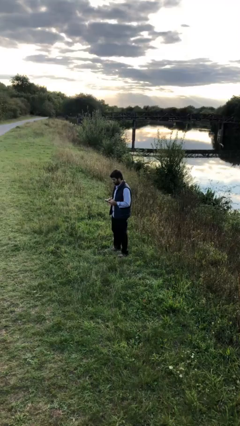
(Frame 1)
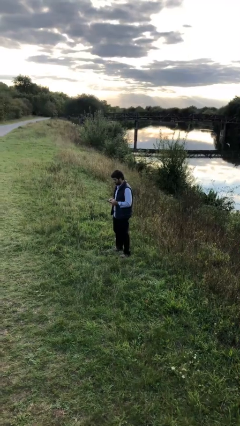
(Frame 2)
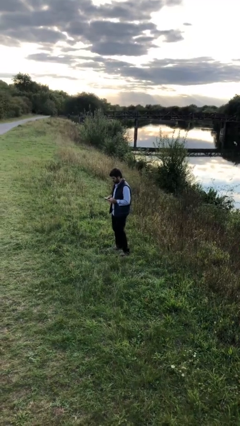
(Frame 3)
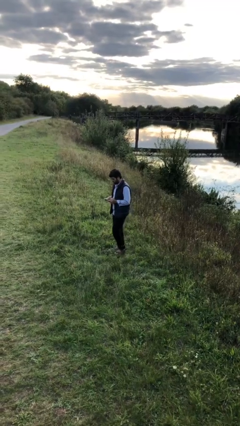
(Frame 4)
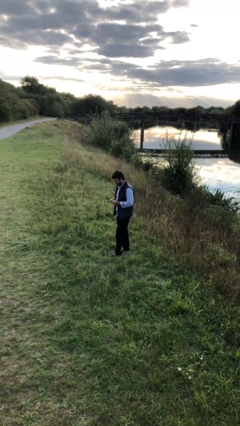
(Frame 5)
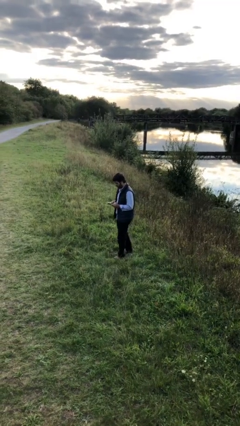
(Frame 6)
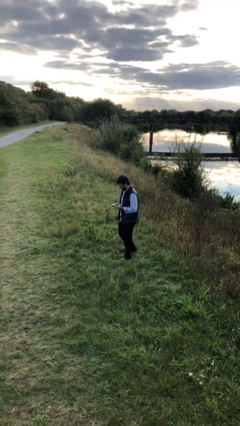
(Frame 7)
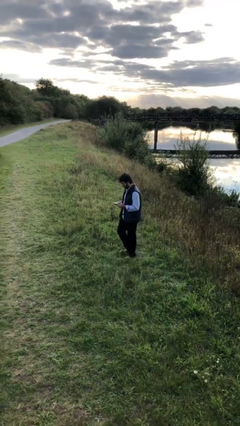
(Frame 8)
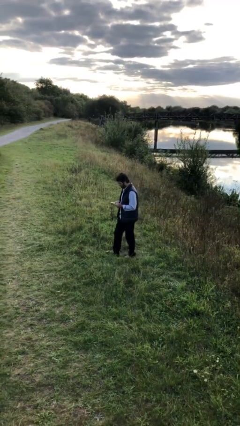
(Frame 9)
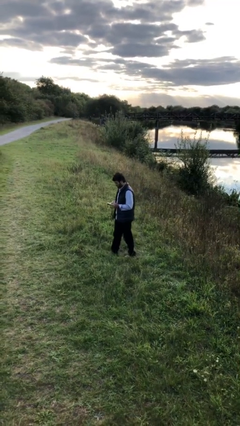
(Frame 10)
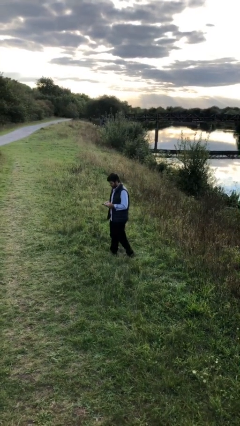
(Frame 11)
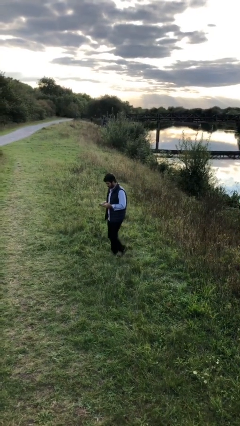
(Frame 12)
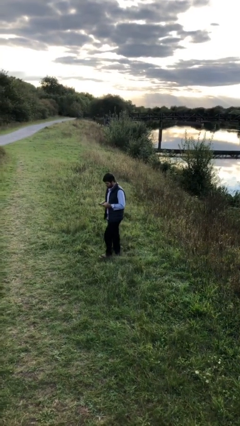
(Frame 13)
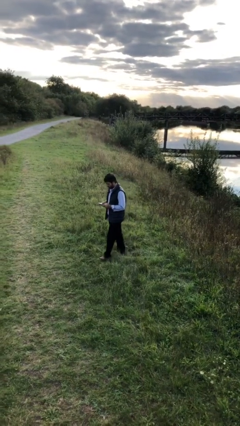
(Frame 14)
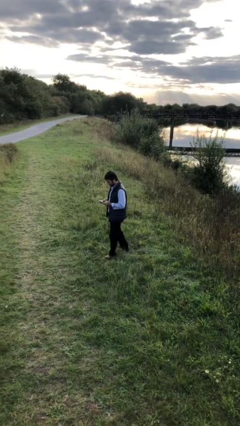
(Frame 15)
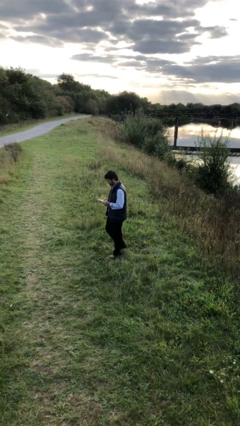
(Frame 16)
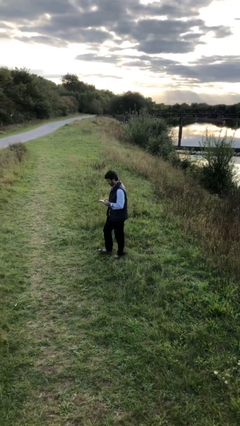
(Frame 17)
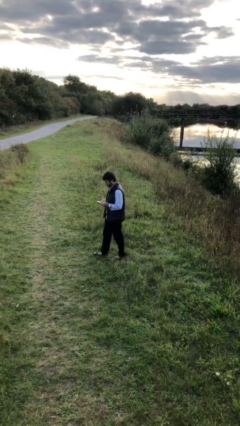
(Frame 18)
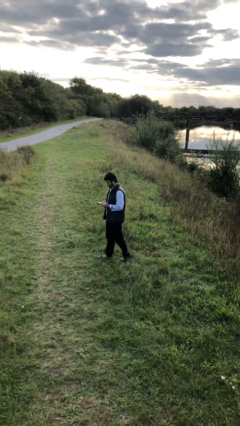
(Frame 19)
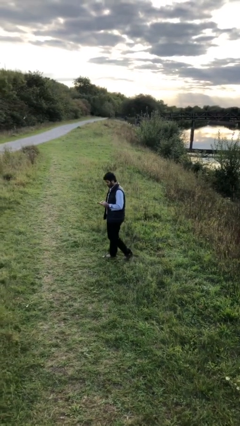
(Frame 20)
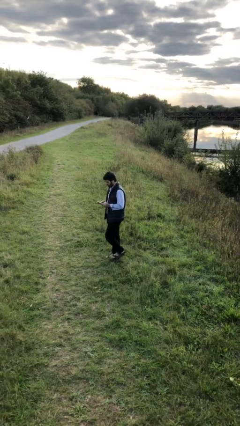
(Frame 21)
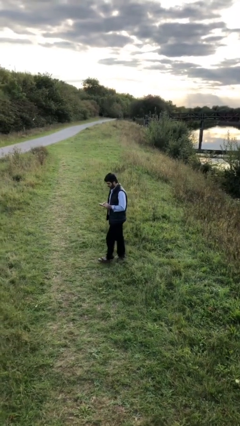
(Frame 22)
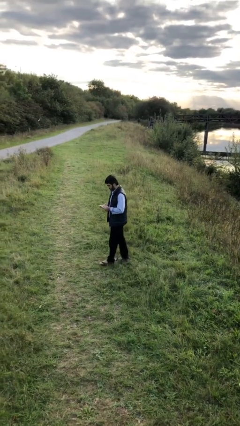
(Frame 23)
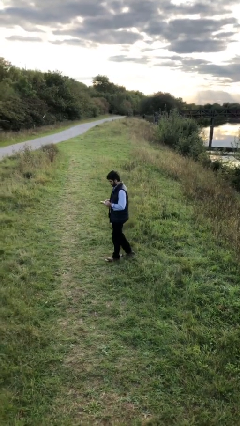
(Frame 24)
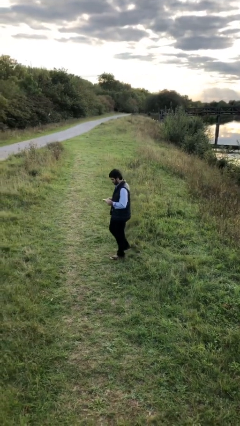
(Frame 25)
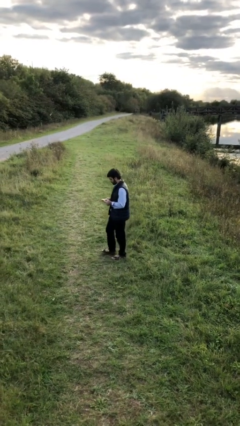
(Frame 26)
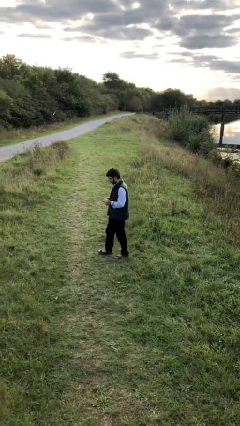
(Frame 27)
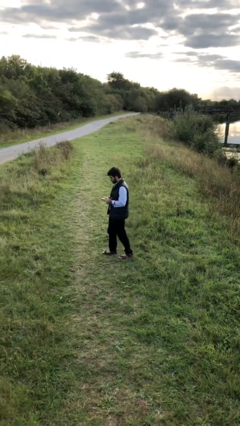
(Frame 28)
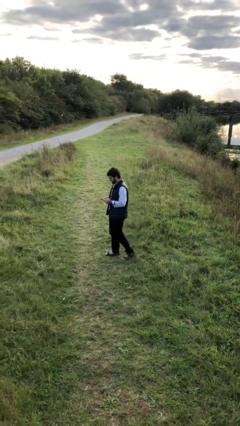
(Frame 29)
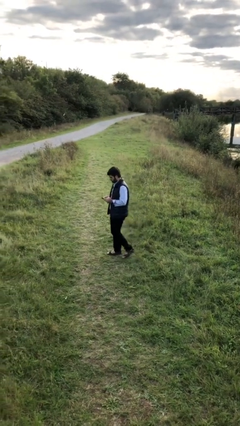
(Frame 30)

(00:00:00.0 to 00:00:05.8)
person texts on phone

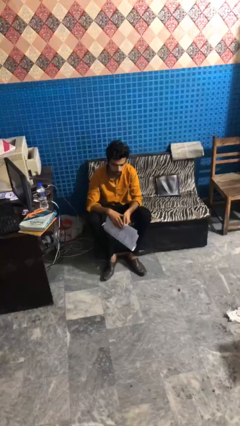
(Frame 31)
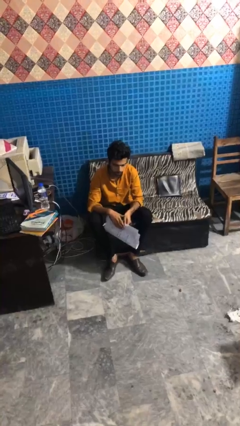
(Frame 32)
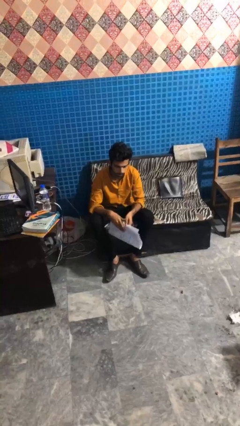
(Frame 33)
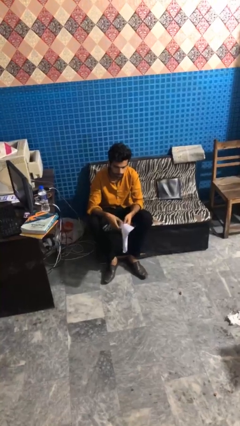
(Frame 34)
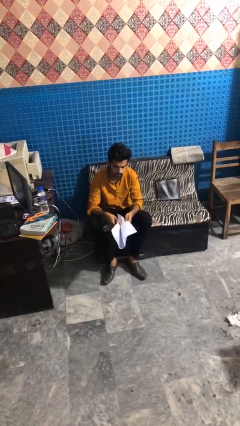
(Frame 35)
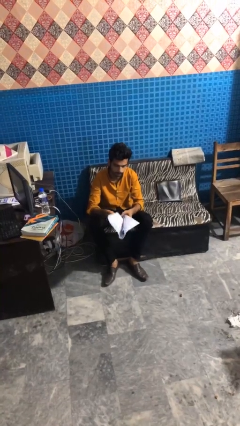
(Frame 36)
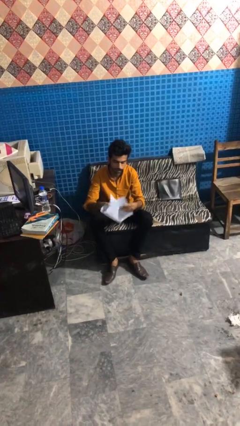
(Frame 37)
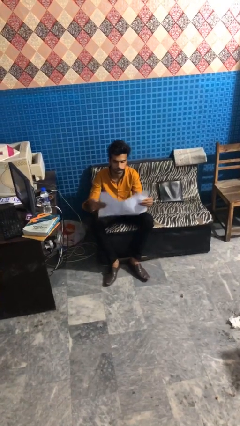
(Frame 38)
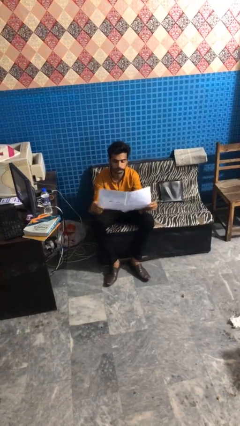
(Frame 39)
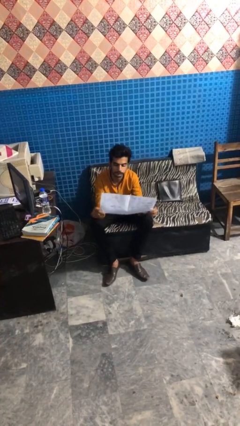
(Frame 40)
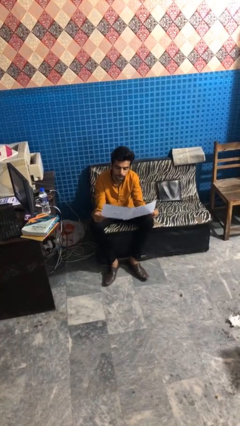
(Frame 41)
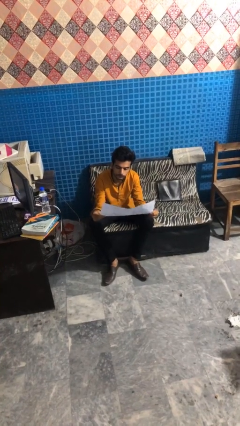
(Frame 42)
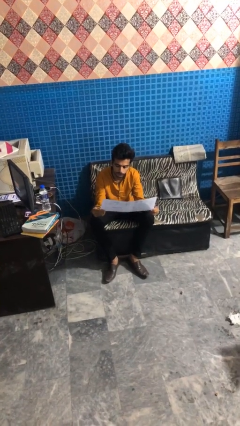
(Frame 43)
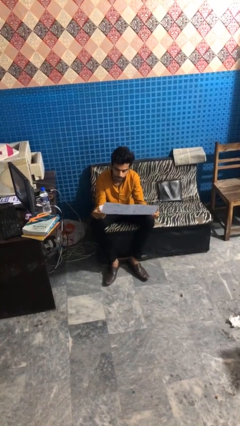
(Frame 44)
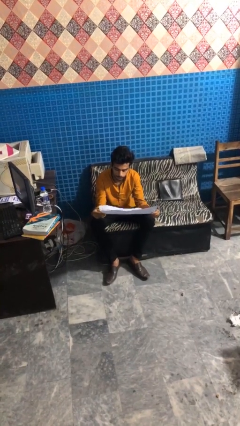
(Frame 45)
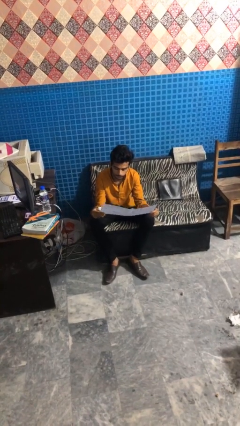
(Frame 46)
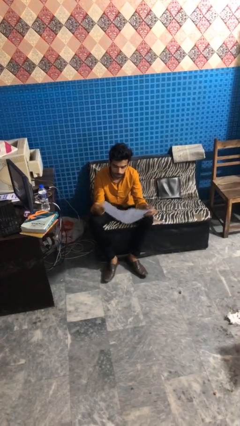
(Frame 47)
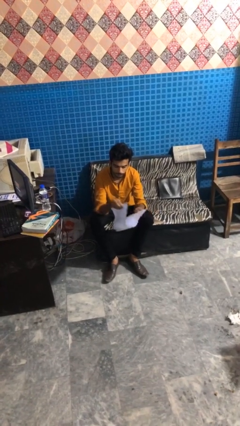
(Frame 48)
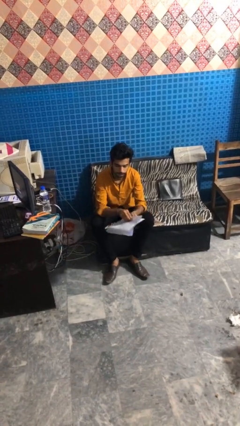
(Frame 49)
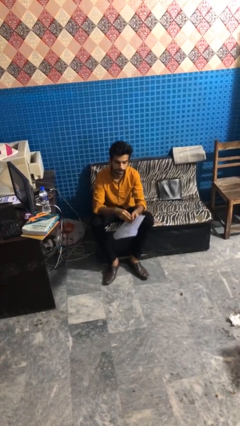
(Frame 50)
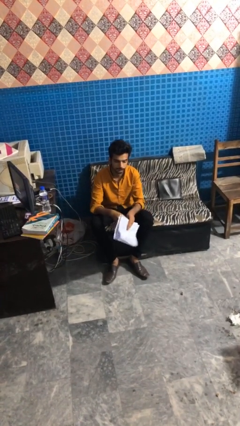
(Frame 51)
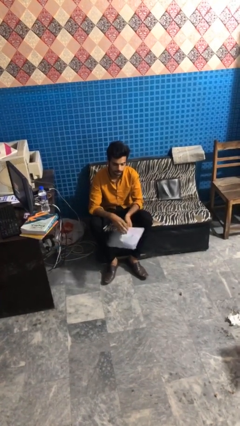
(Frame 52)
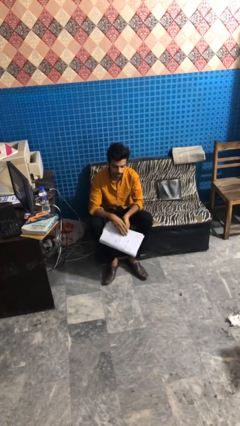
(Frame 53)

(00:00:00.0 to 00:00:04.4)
person reads newspaper

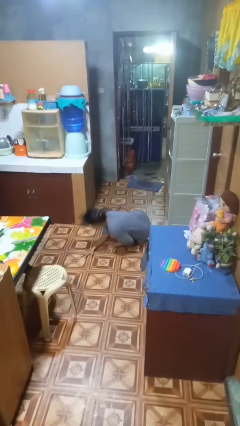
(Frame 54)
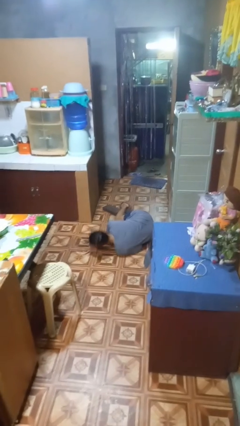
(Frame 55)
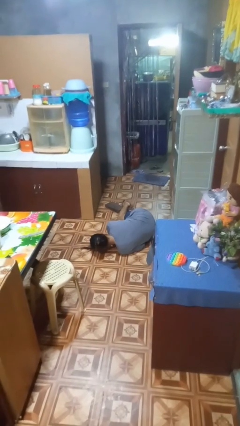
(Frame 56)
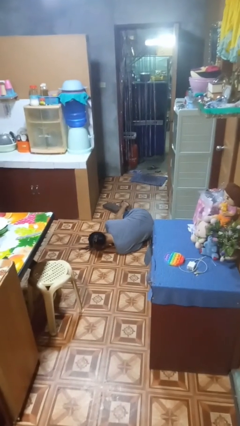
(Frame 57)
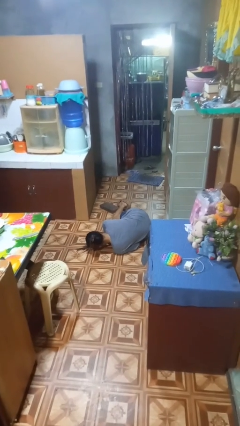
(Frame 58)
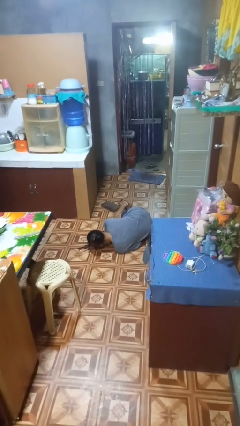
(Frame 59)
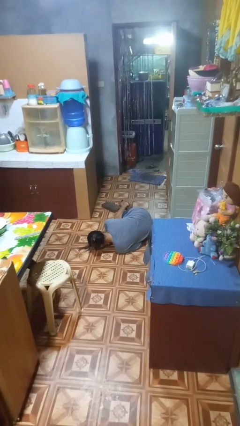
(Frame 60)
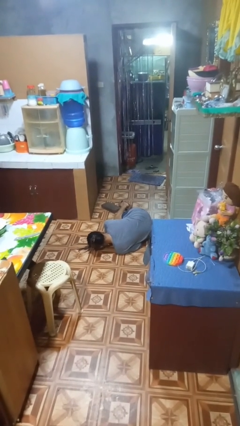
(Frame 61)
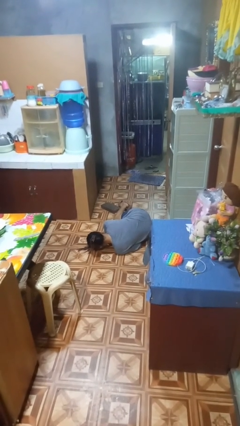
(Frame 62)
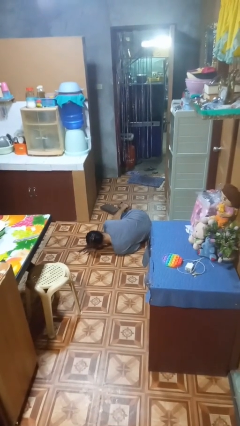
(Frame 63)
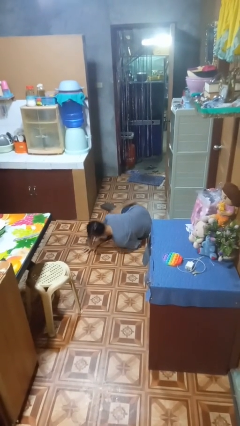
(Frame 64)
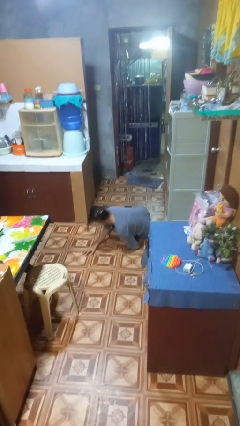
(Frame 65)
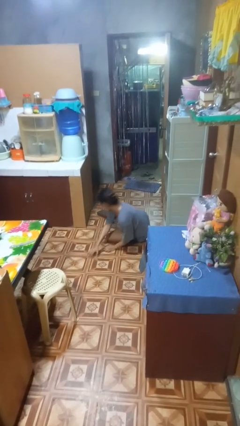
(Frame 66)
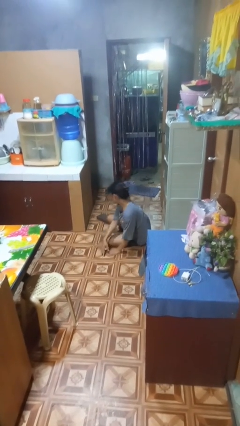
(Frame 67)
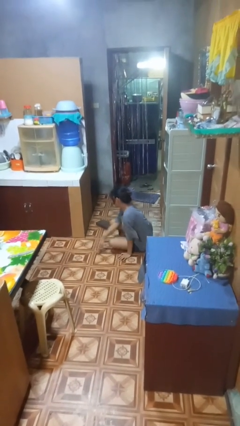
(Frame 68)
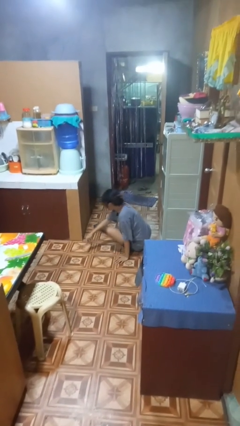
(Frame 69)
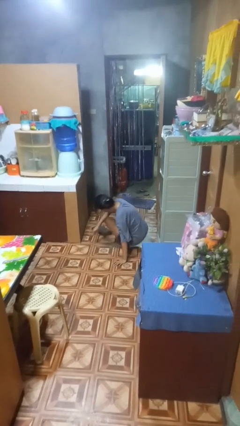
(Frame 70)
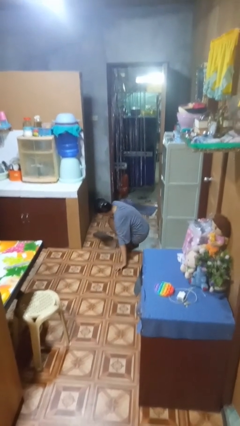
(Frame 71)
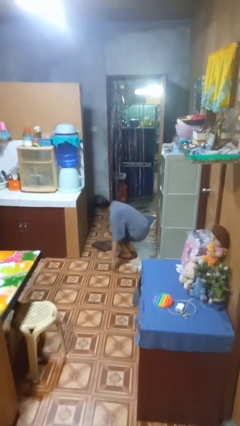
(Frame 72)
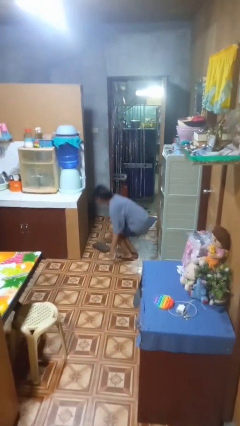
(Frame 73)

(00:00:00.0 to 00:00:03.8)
person lies down on floor

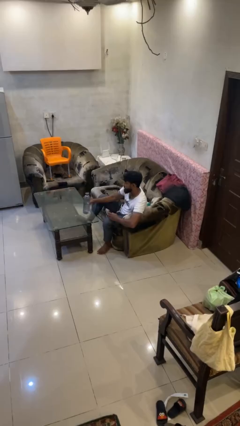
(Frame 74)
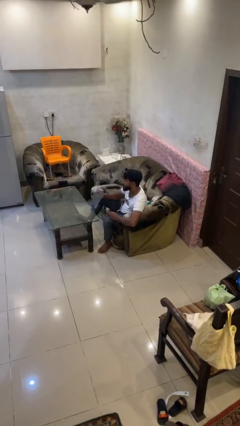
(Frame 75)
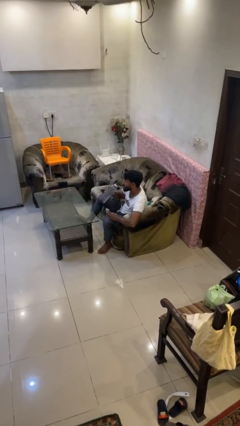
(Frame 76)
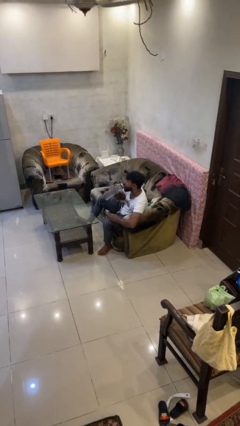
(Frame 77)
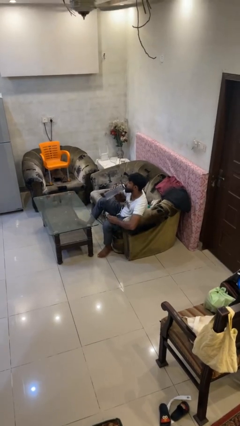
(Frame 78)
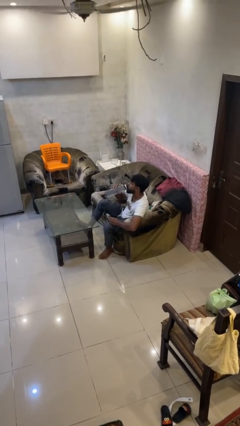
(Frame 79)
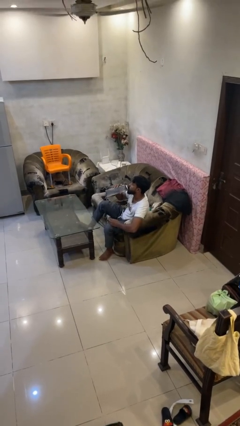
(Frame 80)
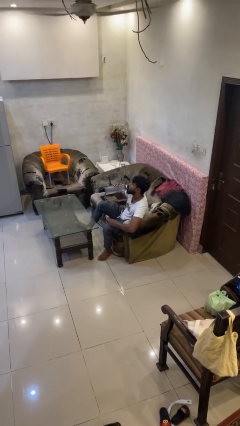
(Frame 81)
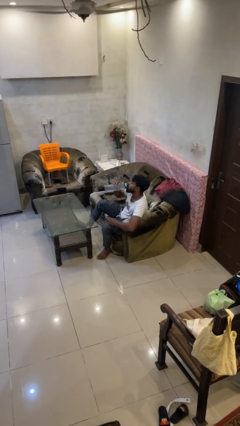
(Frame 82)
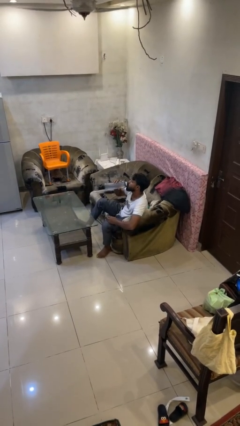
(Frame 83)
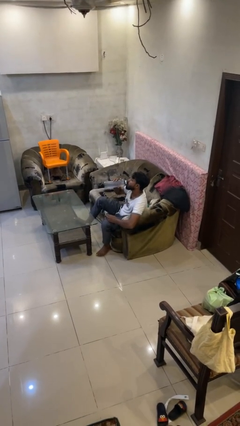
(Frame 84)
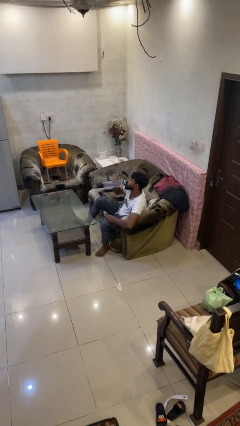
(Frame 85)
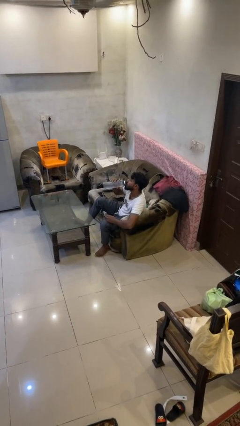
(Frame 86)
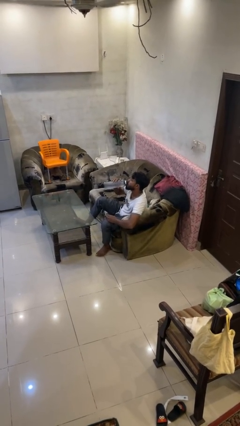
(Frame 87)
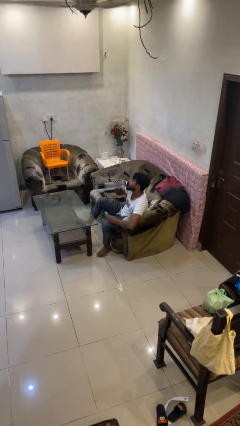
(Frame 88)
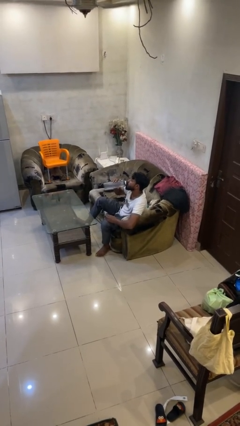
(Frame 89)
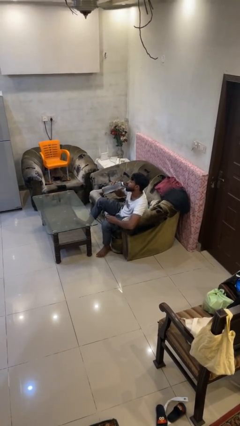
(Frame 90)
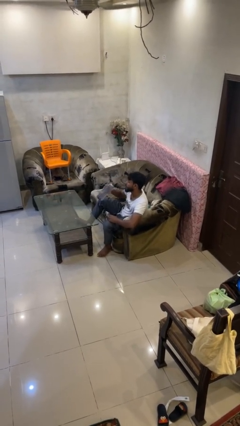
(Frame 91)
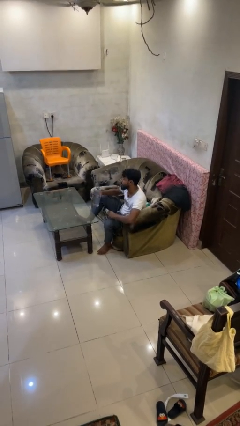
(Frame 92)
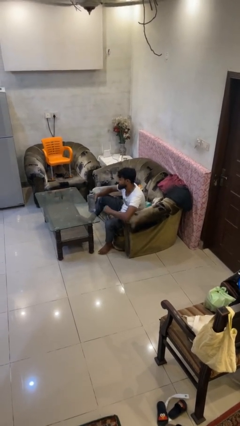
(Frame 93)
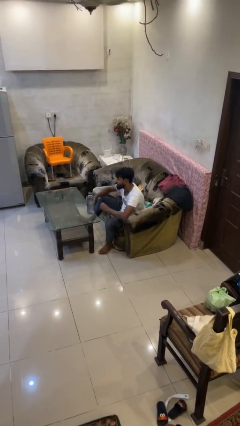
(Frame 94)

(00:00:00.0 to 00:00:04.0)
person drinks from bottle
